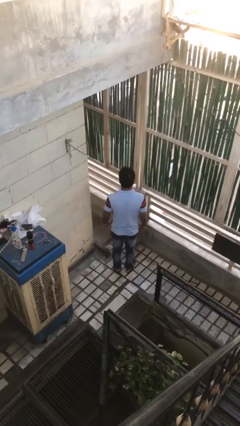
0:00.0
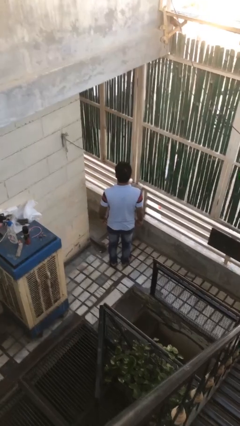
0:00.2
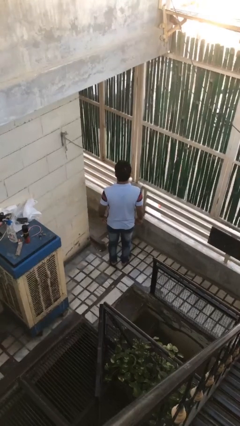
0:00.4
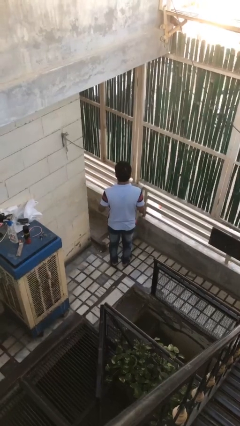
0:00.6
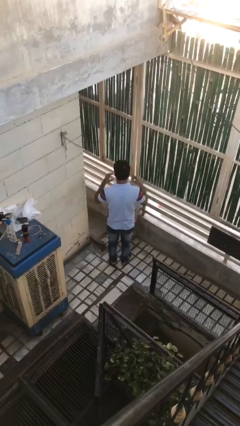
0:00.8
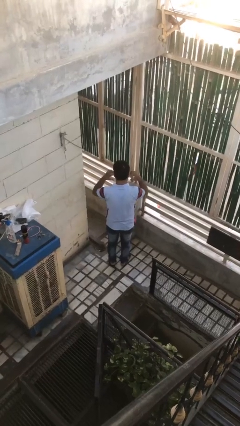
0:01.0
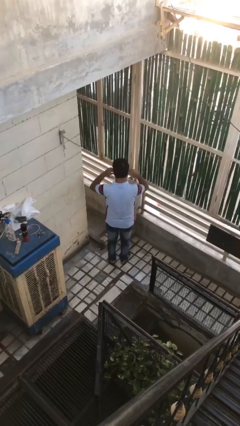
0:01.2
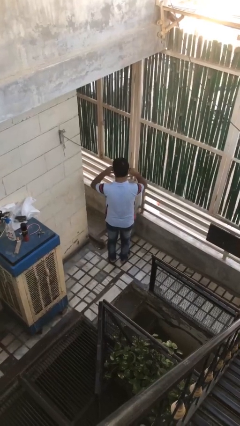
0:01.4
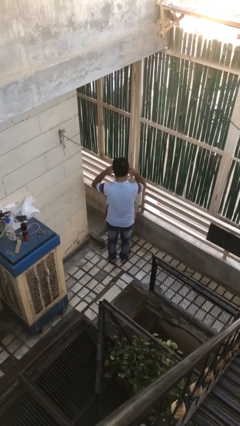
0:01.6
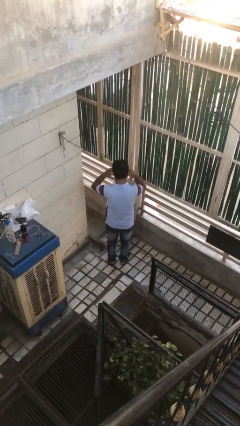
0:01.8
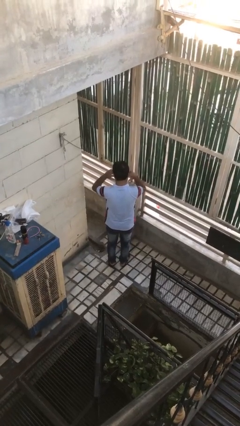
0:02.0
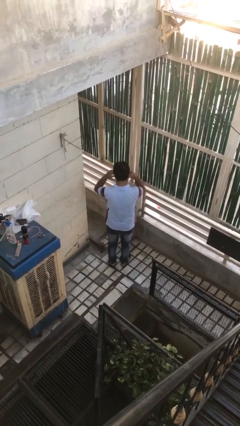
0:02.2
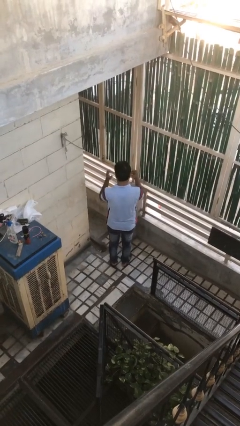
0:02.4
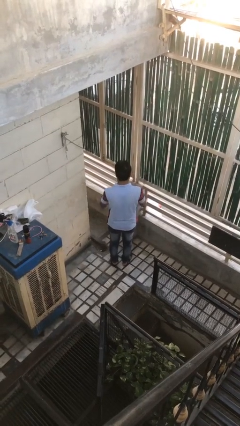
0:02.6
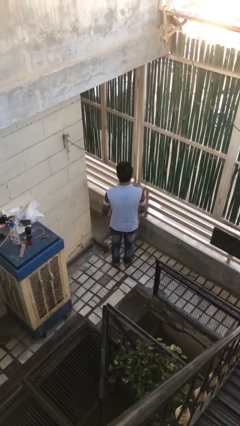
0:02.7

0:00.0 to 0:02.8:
person puts fingers in ear

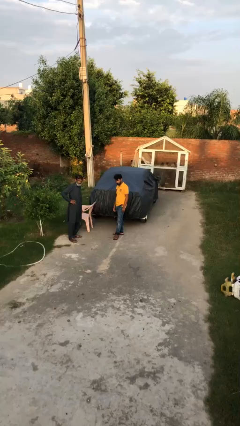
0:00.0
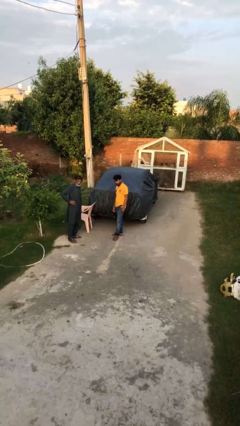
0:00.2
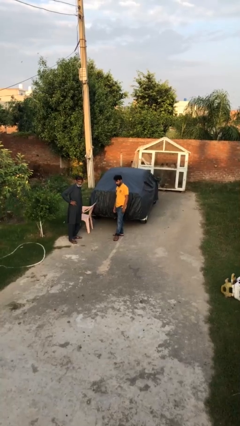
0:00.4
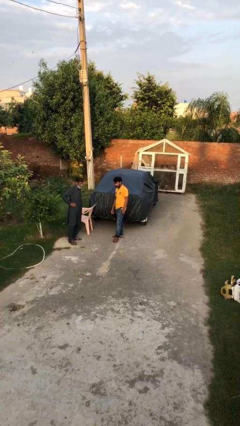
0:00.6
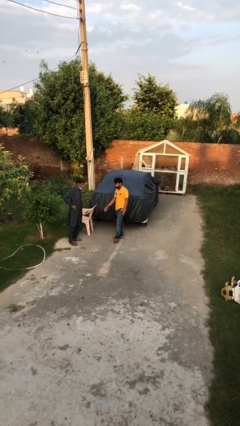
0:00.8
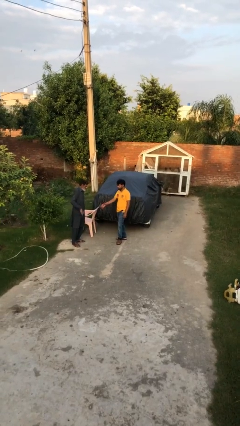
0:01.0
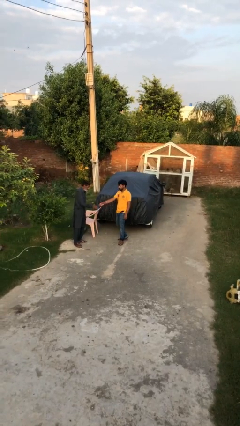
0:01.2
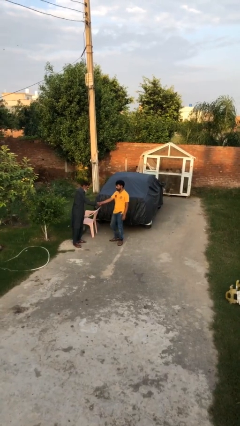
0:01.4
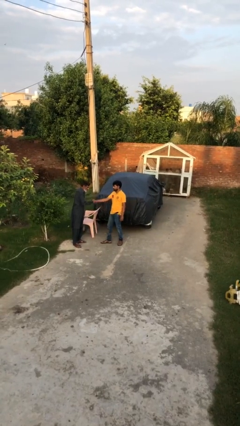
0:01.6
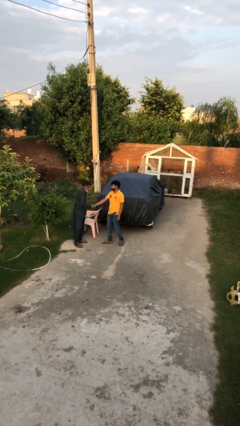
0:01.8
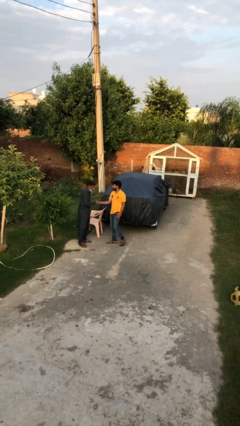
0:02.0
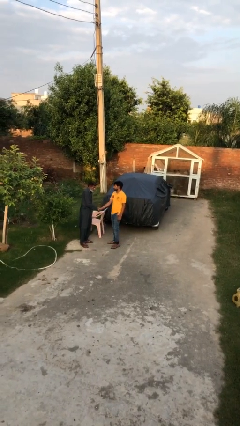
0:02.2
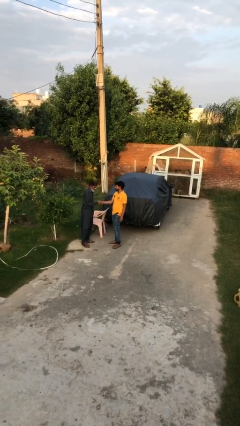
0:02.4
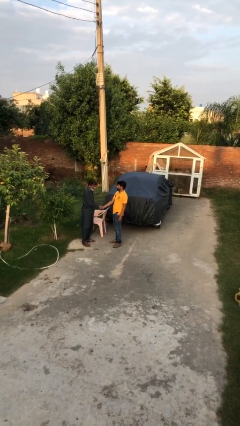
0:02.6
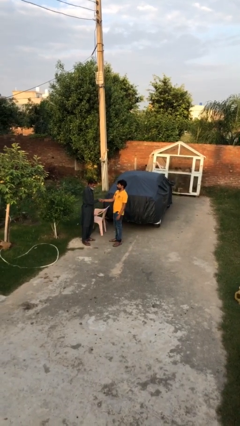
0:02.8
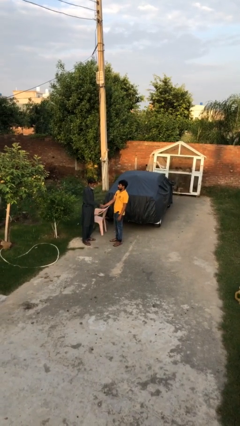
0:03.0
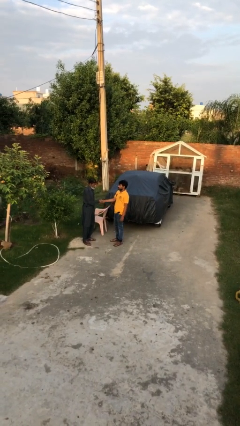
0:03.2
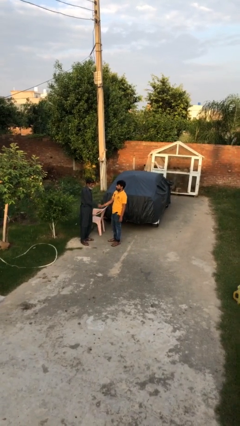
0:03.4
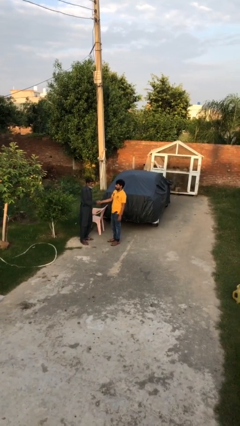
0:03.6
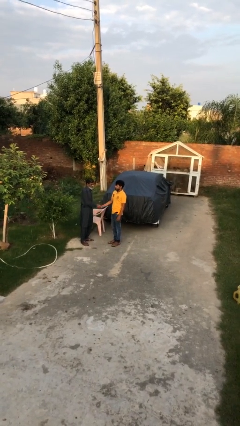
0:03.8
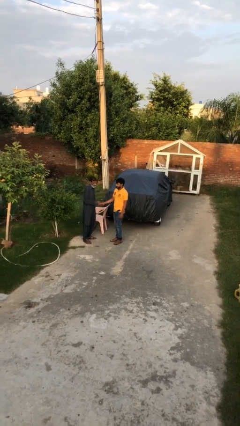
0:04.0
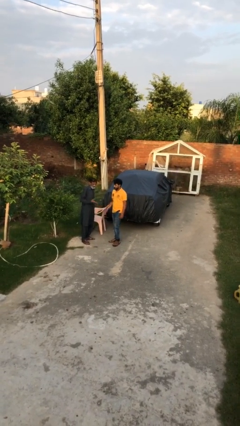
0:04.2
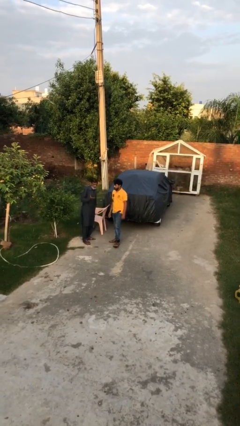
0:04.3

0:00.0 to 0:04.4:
person shakes hand

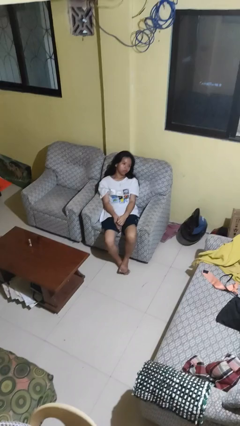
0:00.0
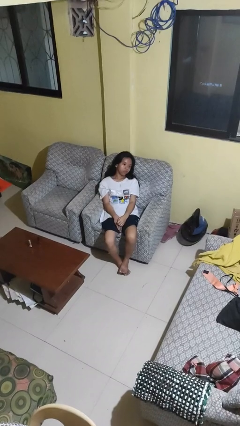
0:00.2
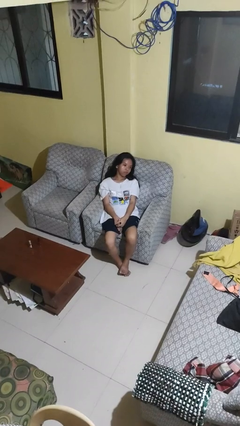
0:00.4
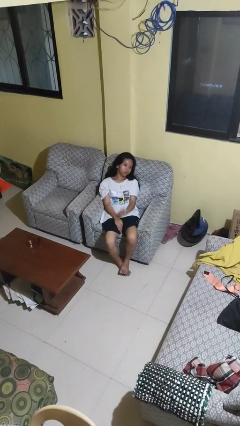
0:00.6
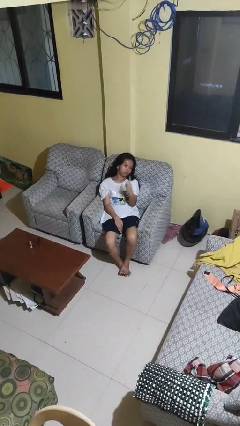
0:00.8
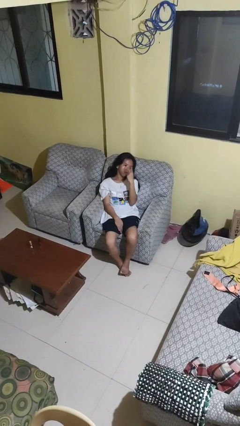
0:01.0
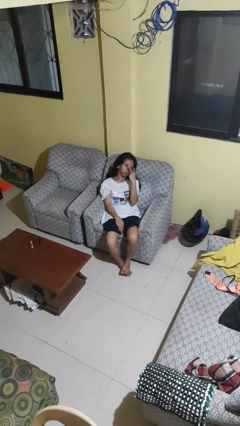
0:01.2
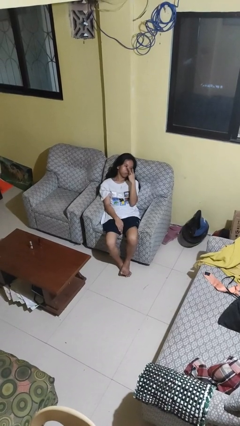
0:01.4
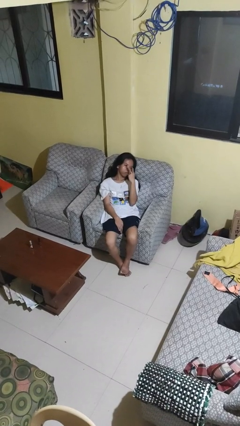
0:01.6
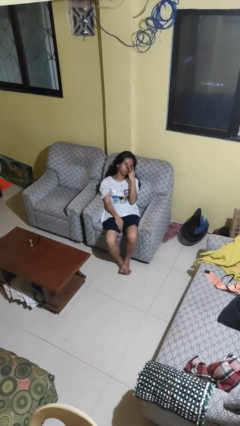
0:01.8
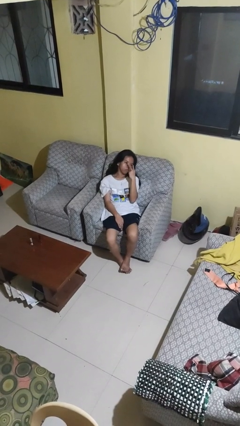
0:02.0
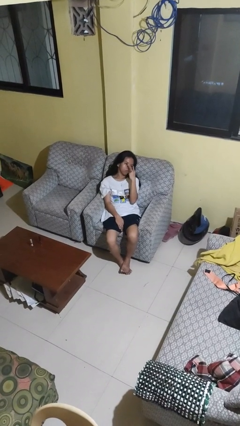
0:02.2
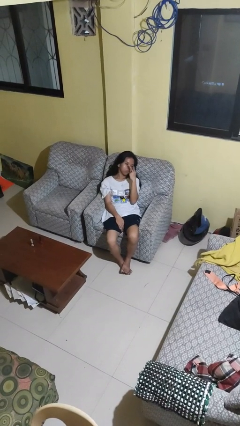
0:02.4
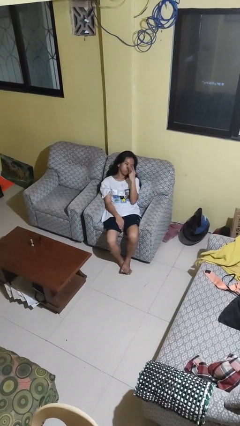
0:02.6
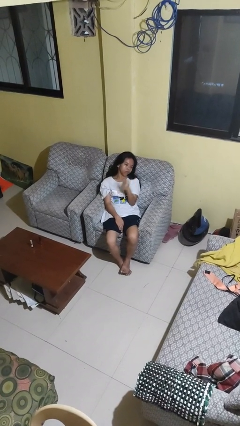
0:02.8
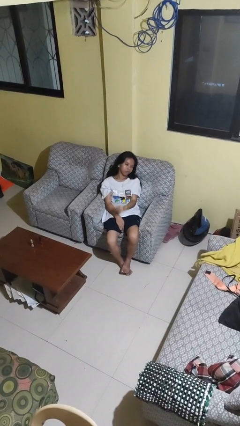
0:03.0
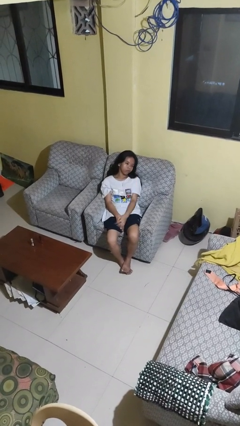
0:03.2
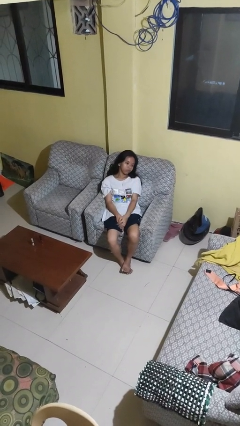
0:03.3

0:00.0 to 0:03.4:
person gestures watch closely

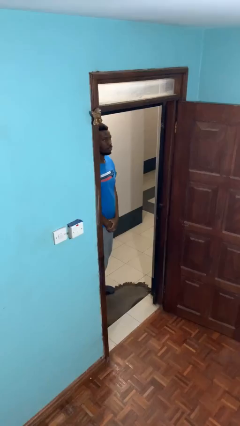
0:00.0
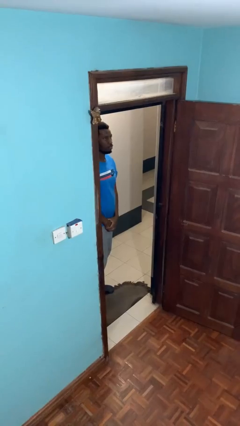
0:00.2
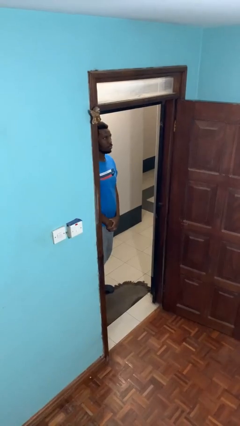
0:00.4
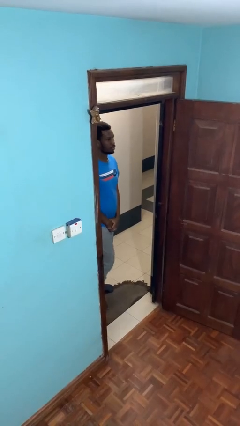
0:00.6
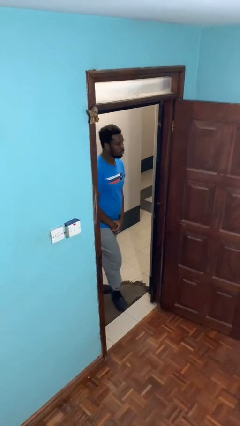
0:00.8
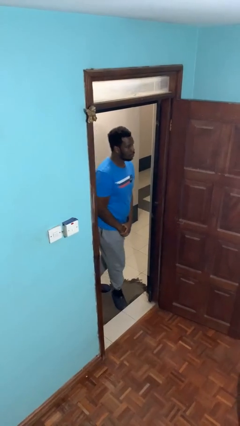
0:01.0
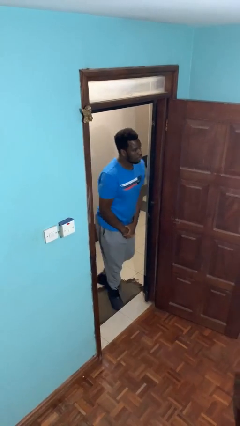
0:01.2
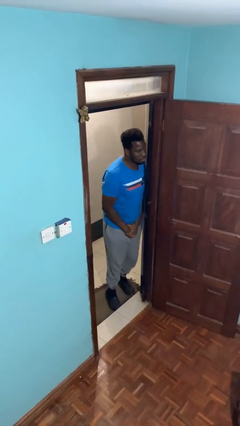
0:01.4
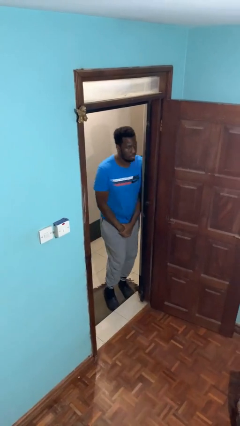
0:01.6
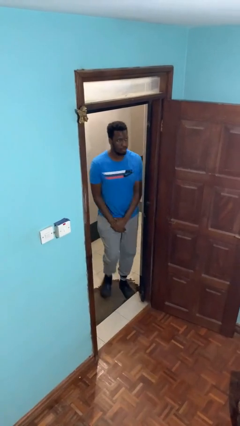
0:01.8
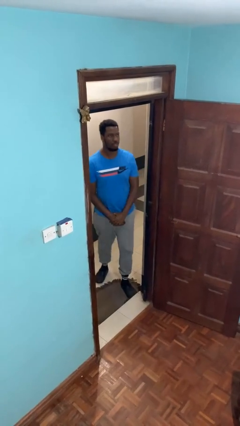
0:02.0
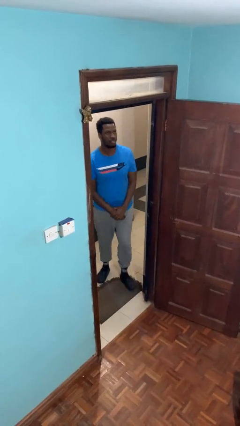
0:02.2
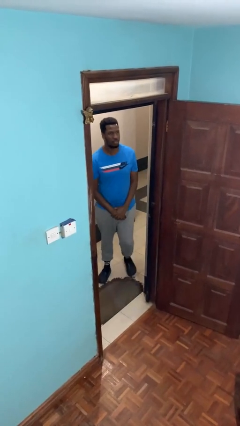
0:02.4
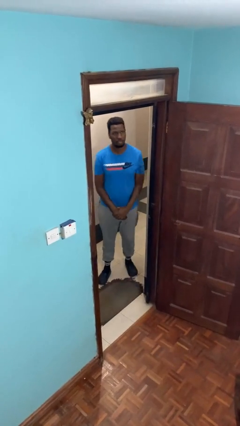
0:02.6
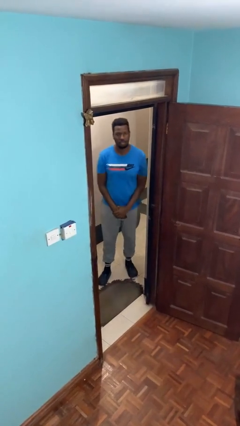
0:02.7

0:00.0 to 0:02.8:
person bumps into wall

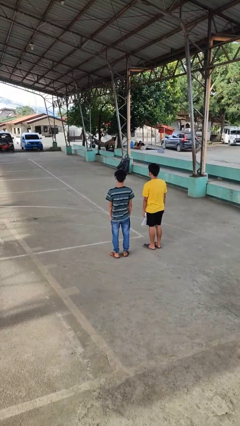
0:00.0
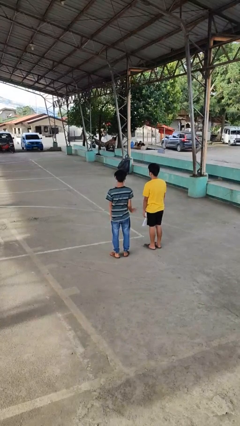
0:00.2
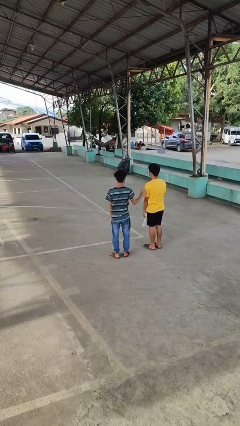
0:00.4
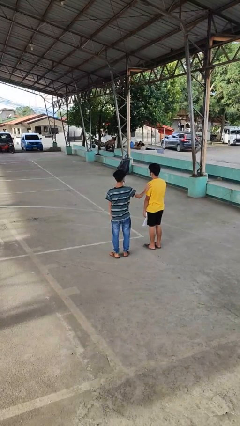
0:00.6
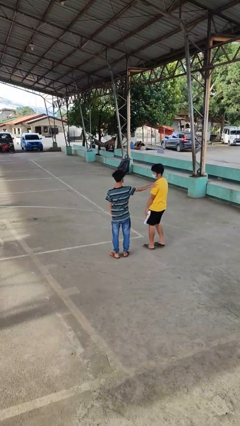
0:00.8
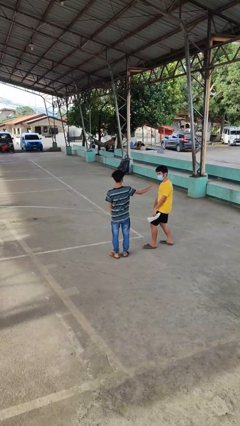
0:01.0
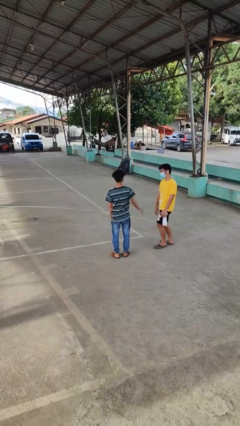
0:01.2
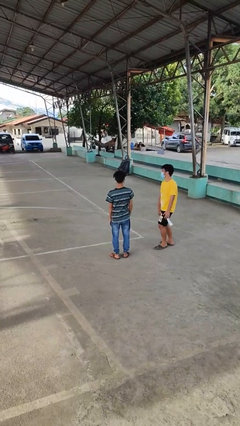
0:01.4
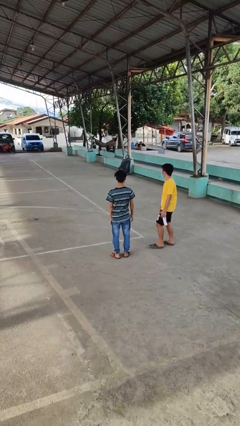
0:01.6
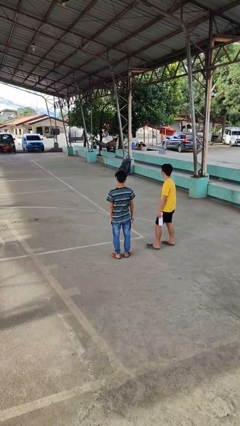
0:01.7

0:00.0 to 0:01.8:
person shoves person

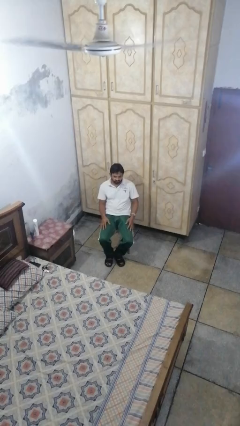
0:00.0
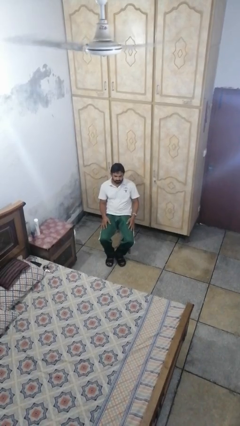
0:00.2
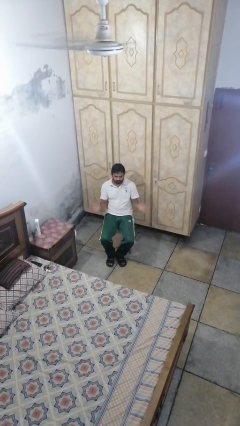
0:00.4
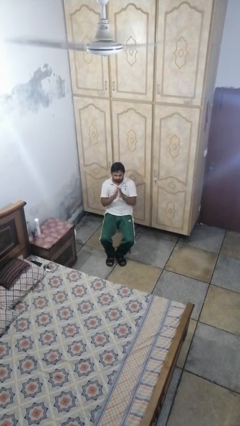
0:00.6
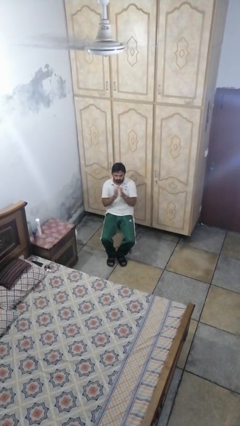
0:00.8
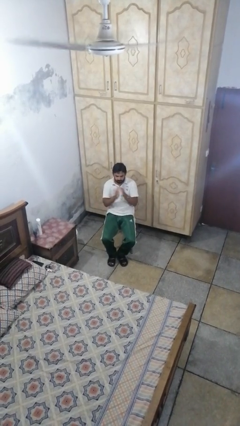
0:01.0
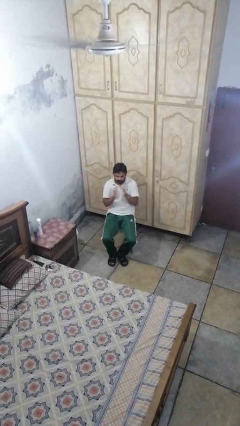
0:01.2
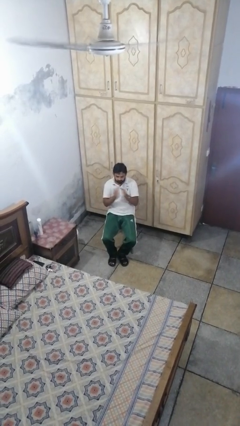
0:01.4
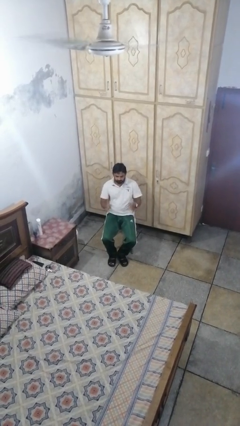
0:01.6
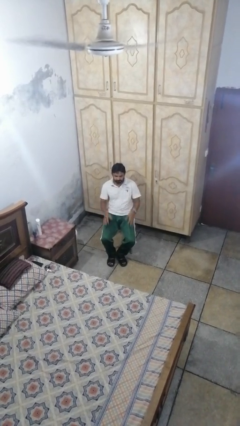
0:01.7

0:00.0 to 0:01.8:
person claps hands

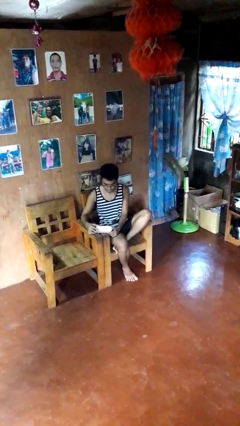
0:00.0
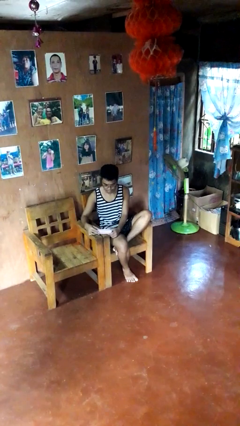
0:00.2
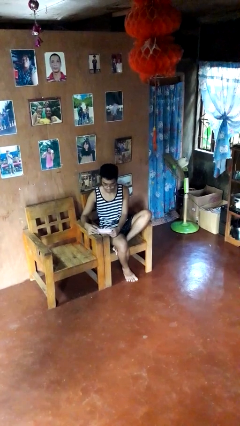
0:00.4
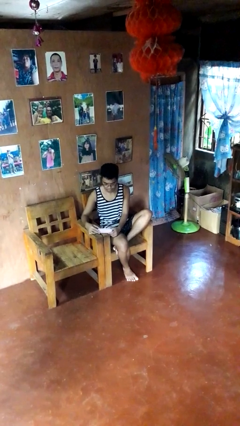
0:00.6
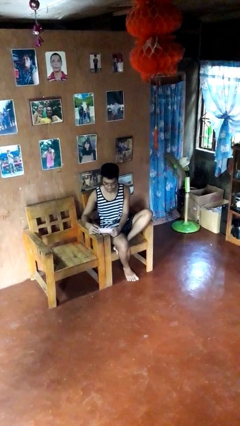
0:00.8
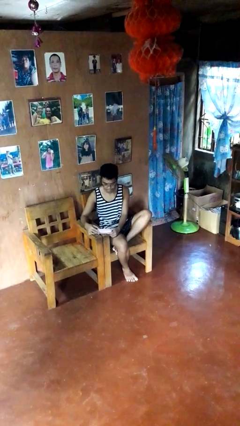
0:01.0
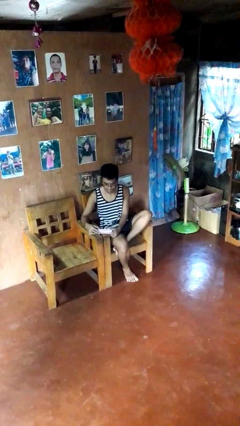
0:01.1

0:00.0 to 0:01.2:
person closes jewelry box
